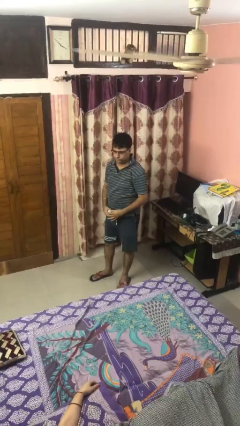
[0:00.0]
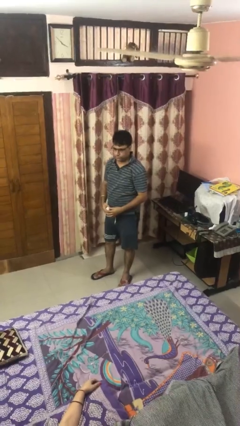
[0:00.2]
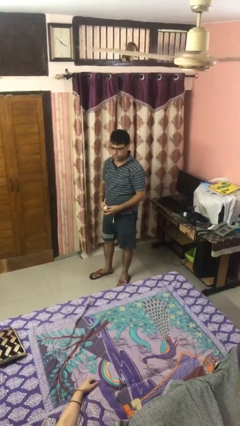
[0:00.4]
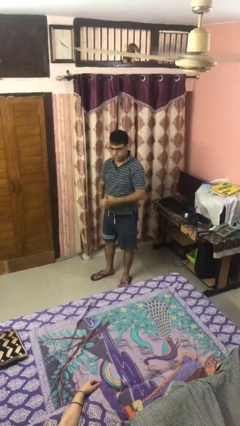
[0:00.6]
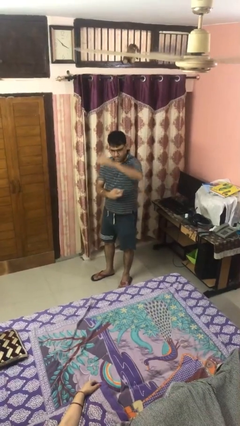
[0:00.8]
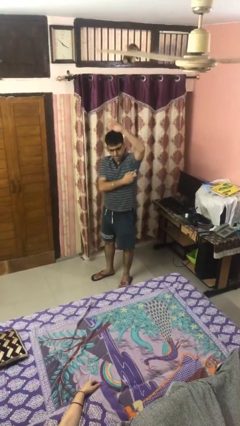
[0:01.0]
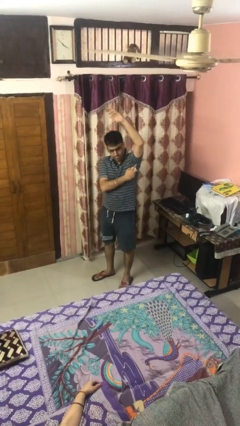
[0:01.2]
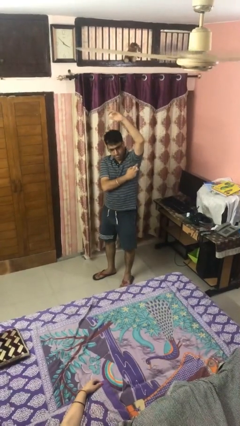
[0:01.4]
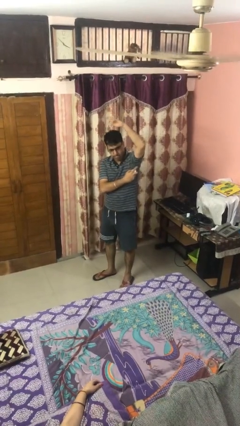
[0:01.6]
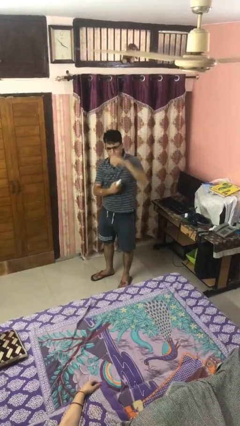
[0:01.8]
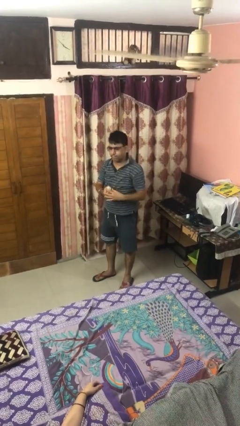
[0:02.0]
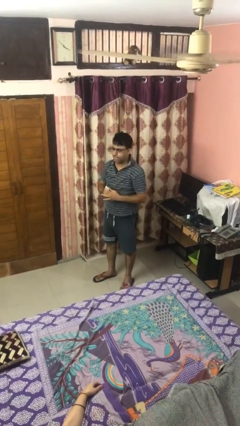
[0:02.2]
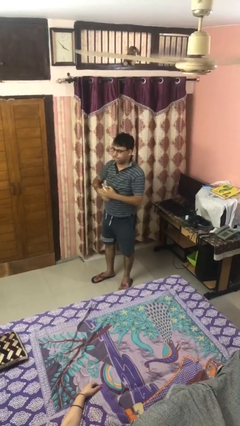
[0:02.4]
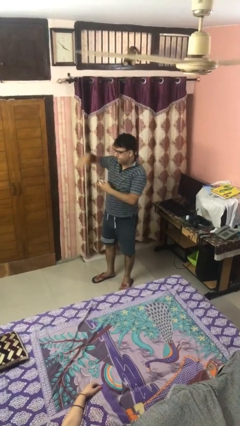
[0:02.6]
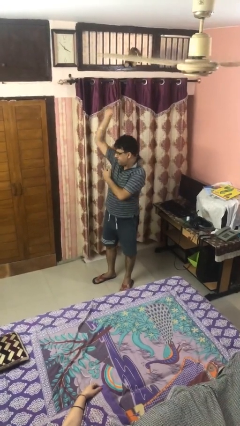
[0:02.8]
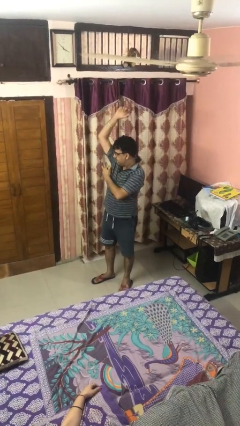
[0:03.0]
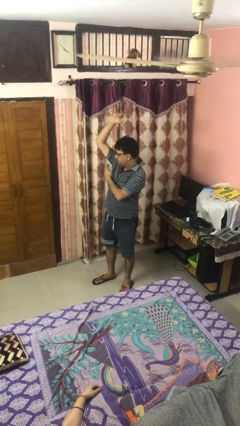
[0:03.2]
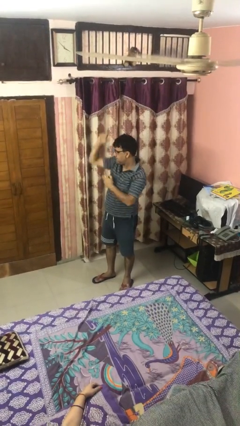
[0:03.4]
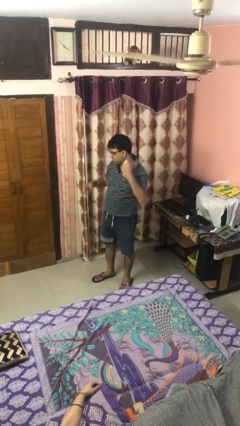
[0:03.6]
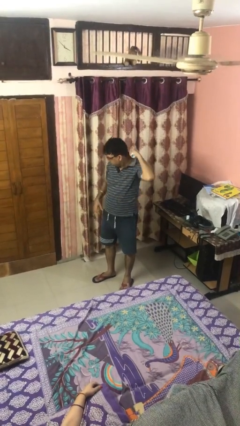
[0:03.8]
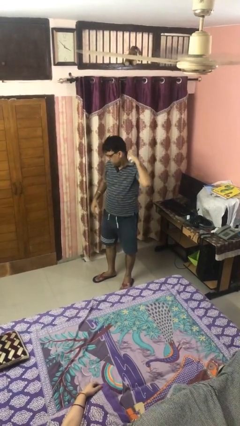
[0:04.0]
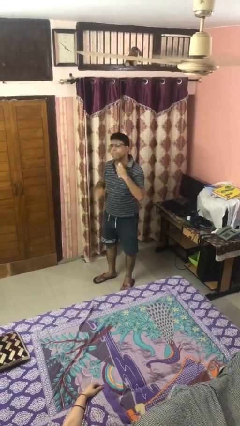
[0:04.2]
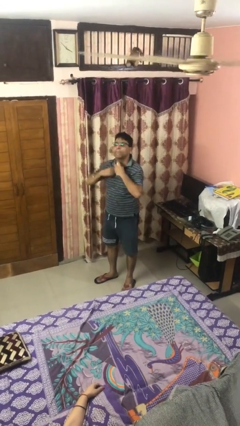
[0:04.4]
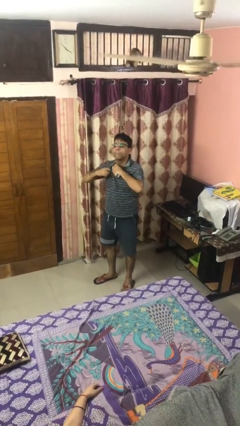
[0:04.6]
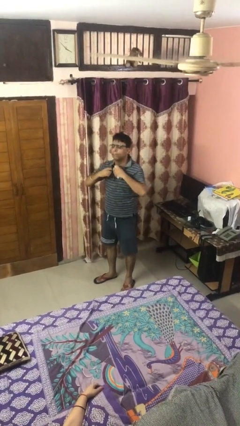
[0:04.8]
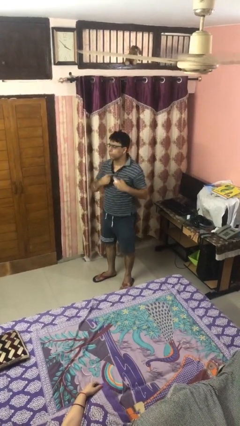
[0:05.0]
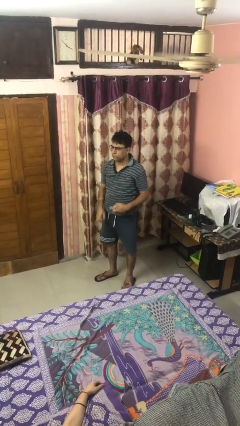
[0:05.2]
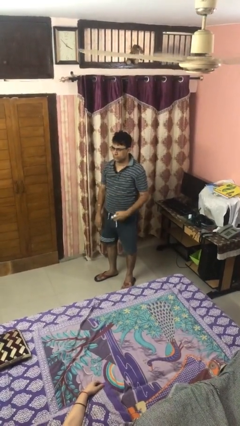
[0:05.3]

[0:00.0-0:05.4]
person applies deodorant

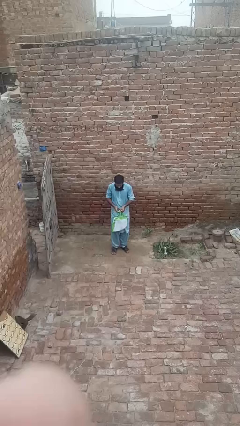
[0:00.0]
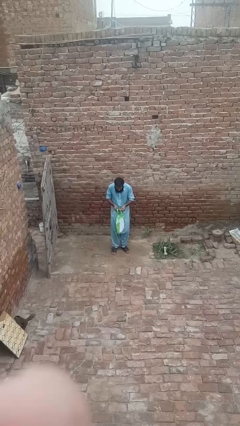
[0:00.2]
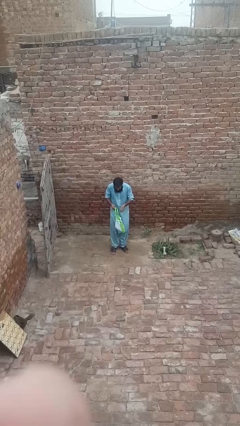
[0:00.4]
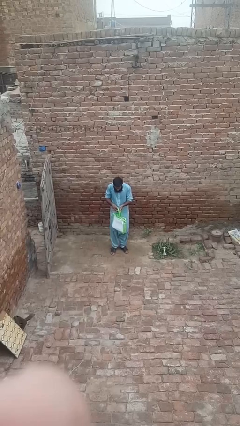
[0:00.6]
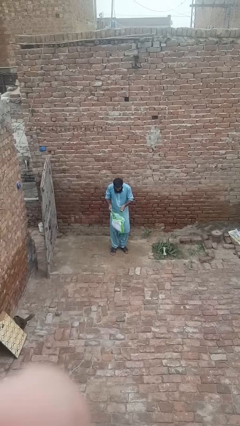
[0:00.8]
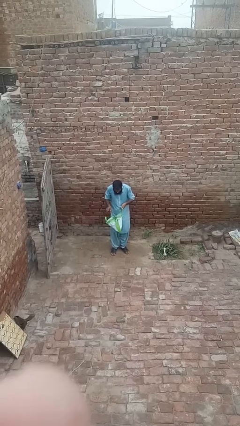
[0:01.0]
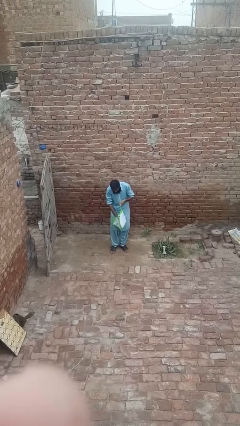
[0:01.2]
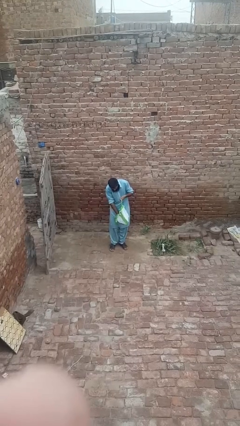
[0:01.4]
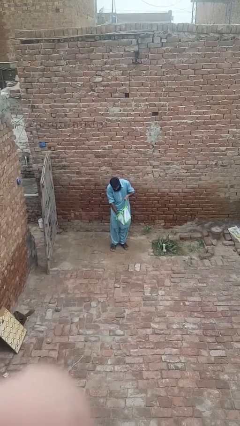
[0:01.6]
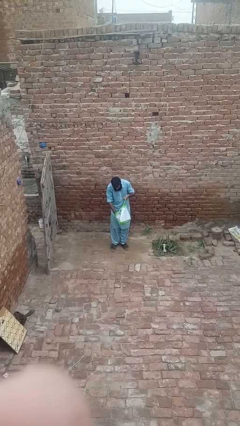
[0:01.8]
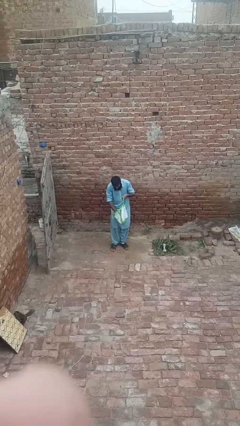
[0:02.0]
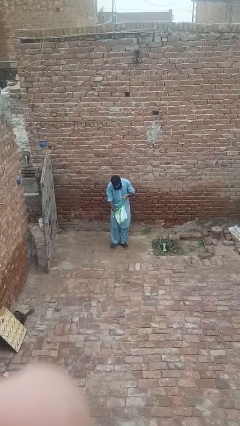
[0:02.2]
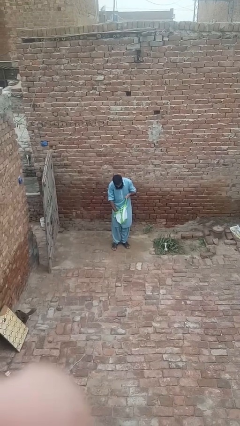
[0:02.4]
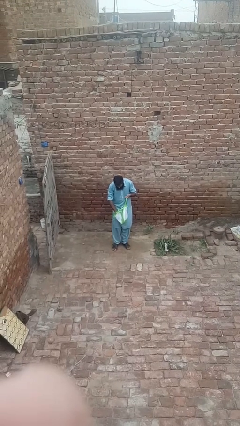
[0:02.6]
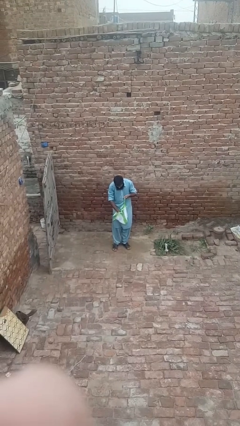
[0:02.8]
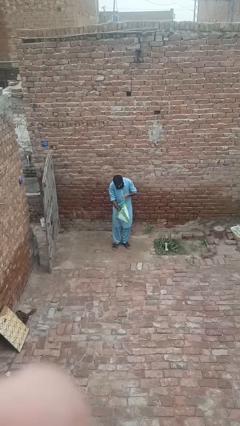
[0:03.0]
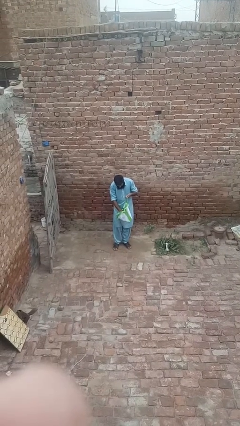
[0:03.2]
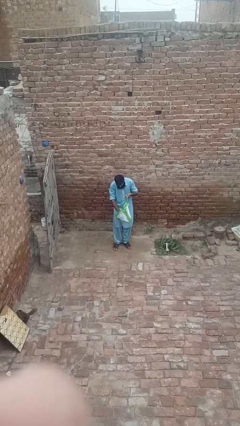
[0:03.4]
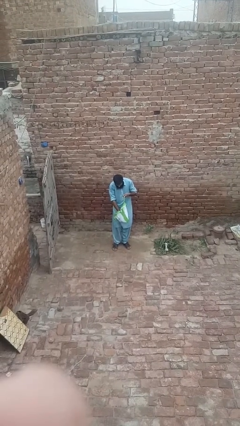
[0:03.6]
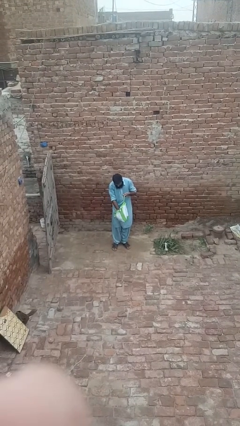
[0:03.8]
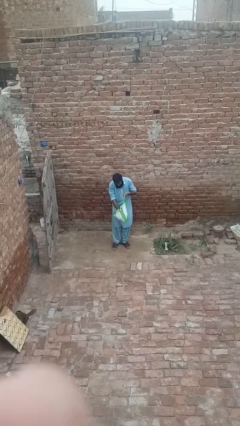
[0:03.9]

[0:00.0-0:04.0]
person searches in bag

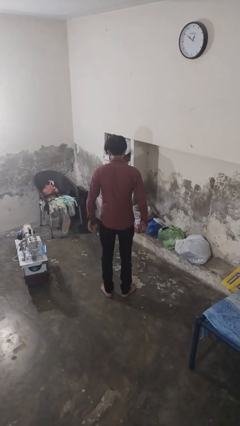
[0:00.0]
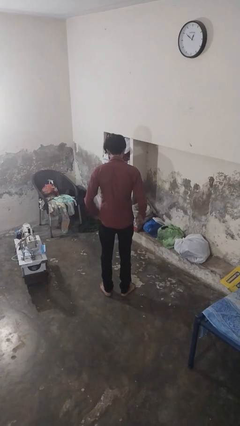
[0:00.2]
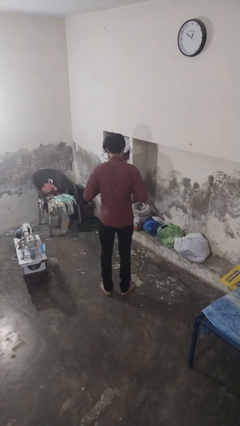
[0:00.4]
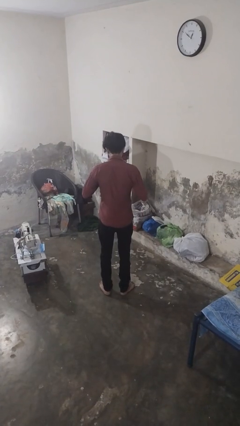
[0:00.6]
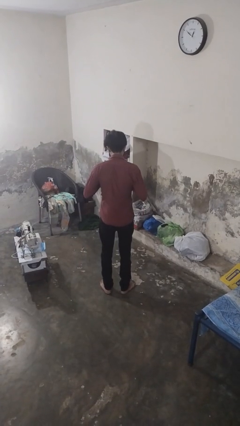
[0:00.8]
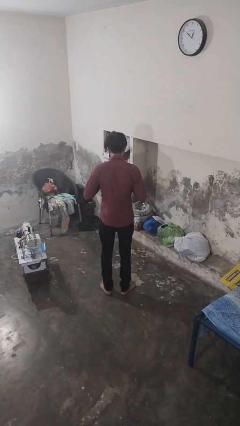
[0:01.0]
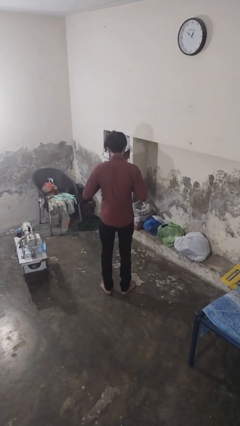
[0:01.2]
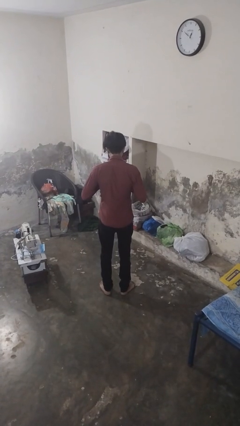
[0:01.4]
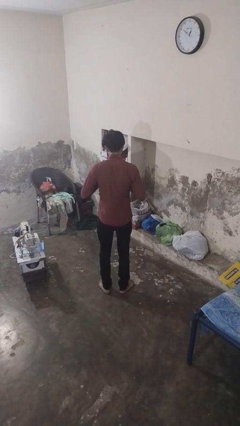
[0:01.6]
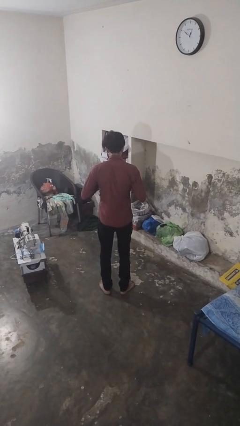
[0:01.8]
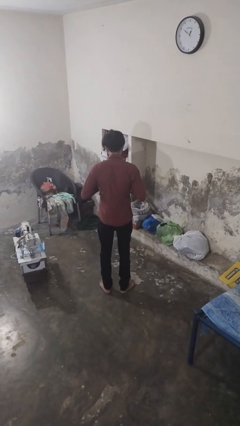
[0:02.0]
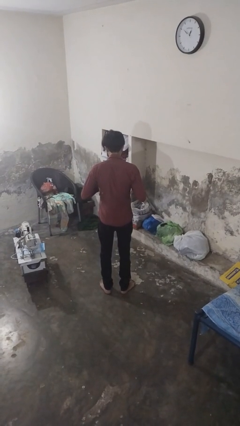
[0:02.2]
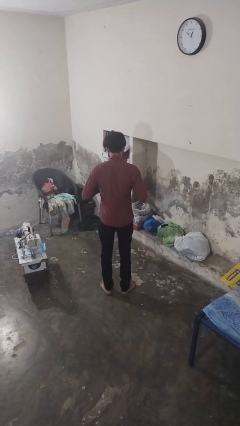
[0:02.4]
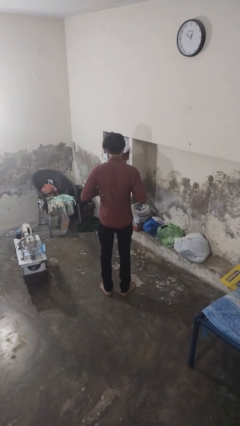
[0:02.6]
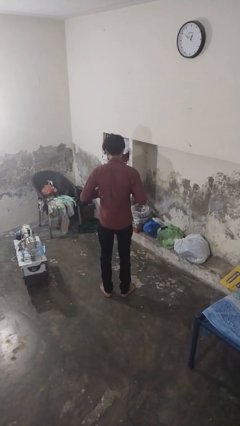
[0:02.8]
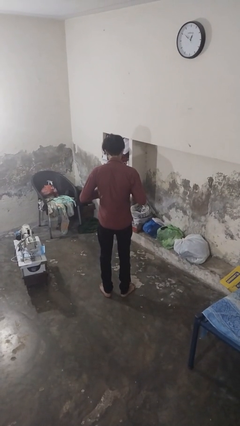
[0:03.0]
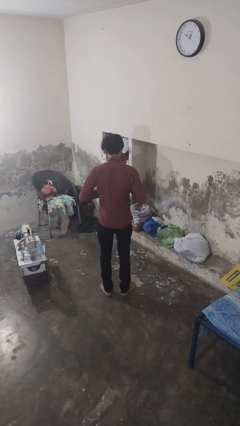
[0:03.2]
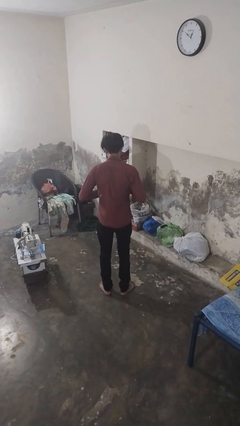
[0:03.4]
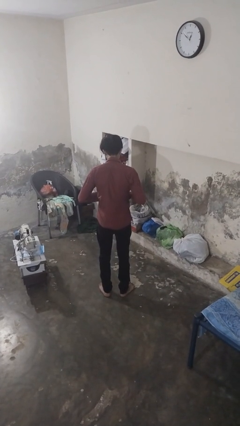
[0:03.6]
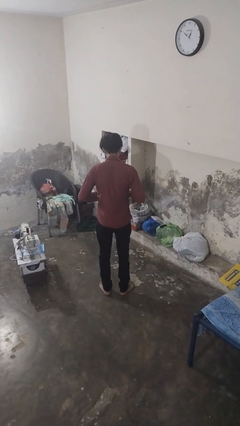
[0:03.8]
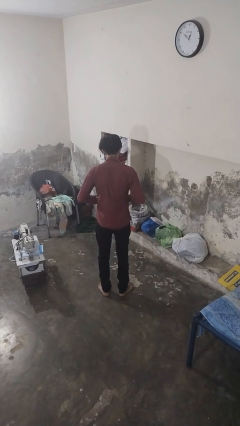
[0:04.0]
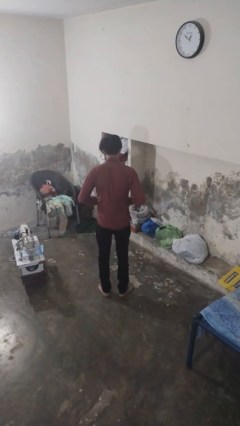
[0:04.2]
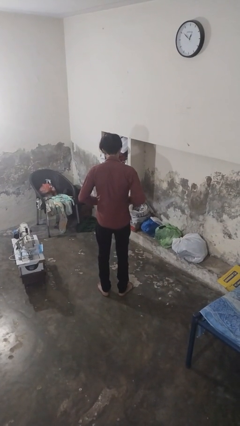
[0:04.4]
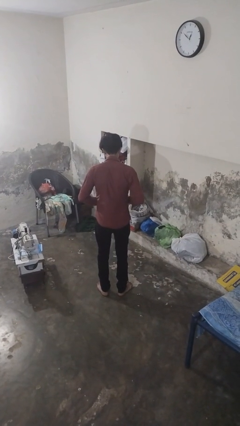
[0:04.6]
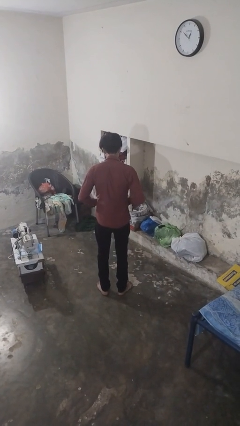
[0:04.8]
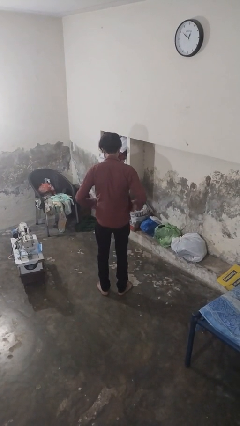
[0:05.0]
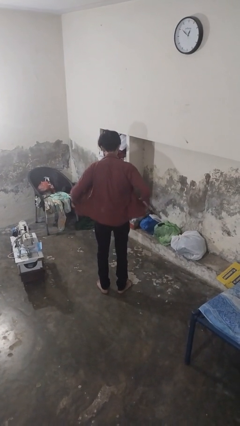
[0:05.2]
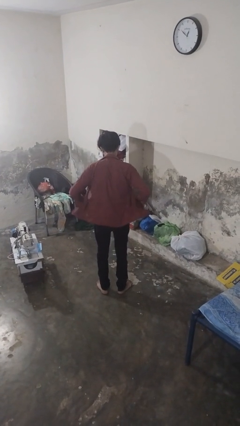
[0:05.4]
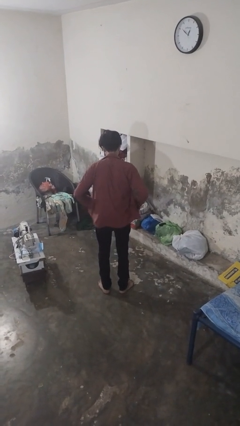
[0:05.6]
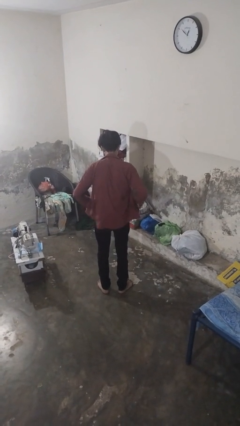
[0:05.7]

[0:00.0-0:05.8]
person unbuttons shirt

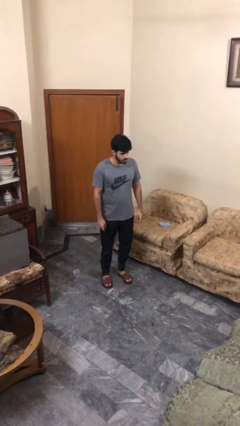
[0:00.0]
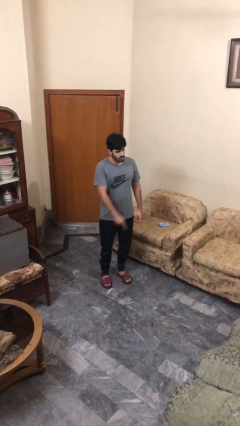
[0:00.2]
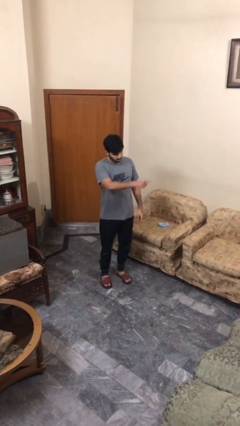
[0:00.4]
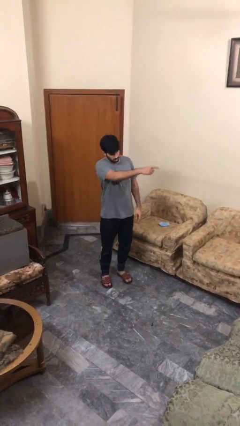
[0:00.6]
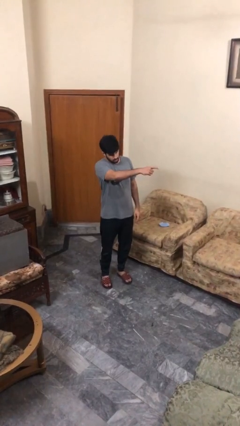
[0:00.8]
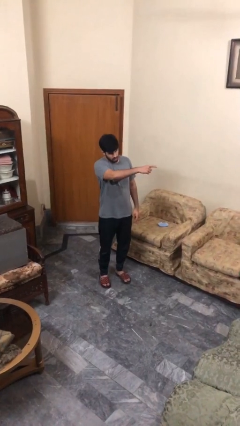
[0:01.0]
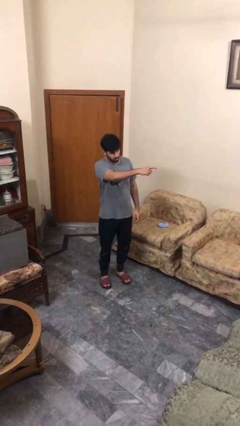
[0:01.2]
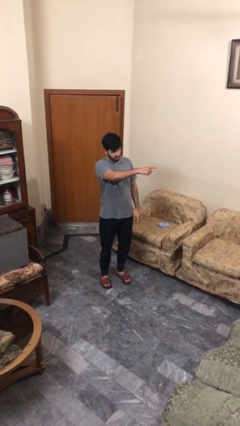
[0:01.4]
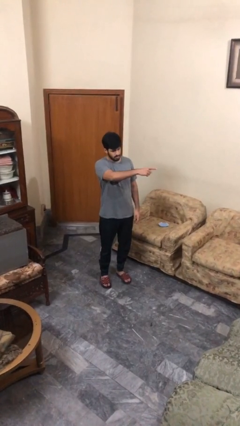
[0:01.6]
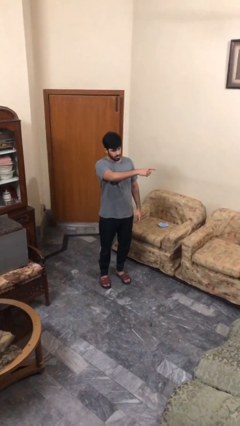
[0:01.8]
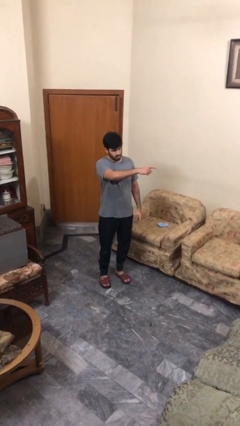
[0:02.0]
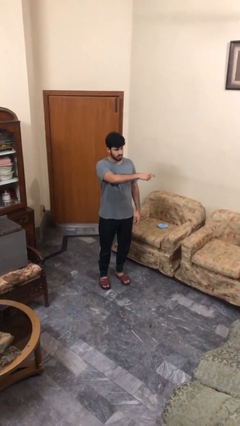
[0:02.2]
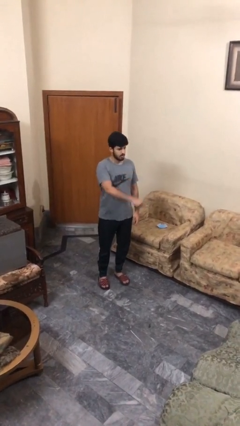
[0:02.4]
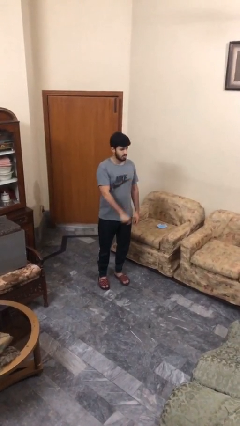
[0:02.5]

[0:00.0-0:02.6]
person points at person
